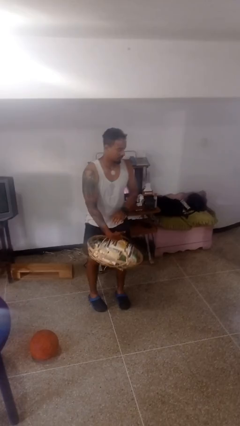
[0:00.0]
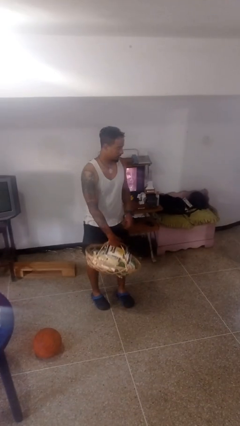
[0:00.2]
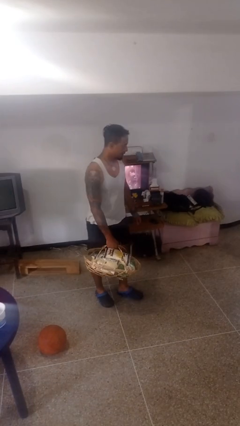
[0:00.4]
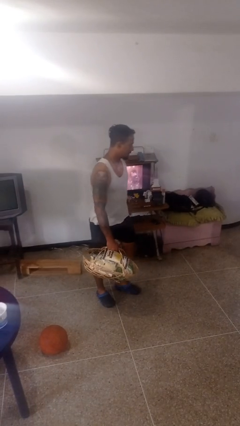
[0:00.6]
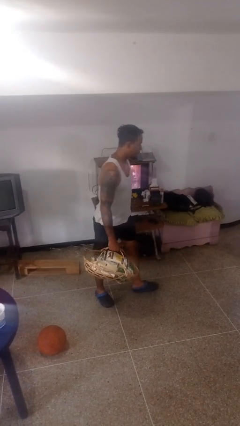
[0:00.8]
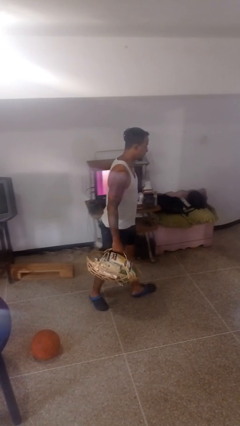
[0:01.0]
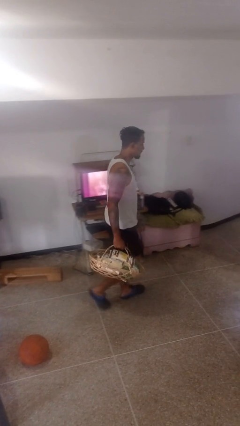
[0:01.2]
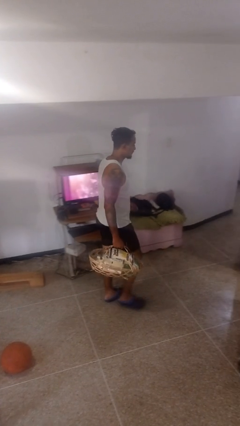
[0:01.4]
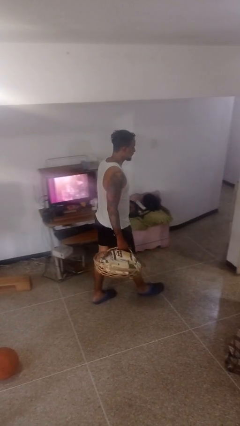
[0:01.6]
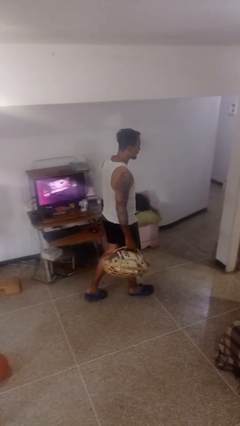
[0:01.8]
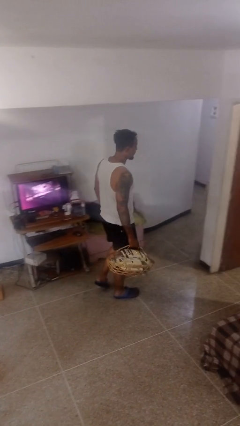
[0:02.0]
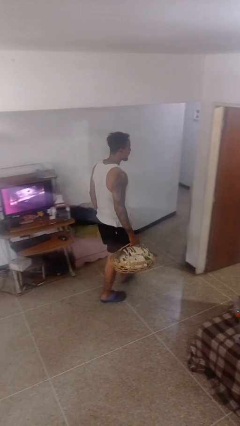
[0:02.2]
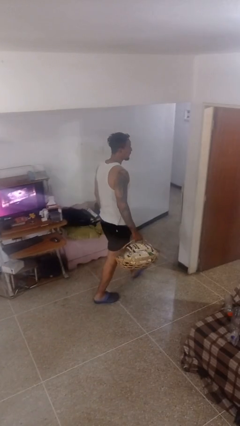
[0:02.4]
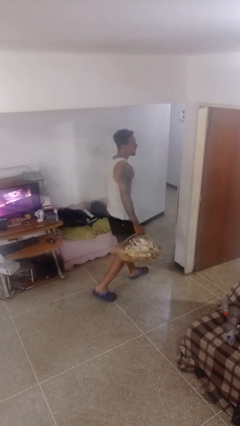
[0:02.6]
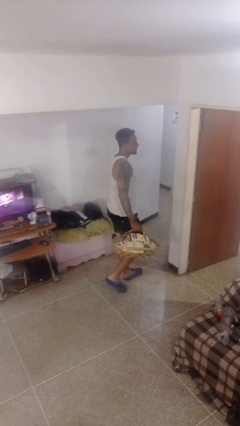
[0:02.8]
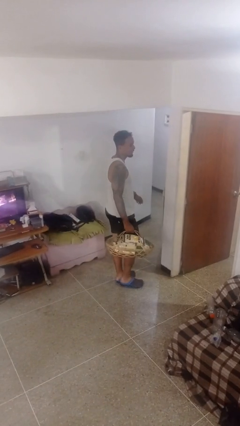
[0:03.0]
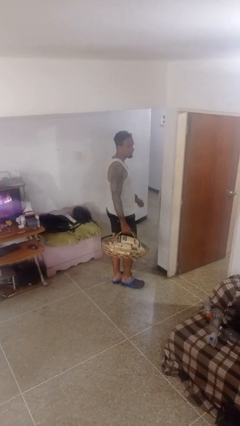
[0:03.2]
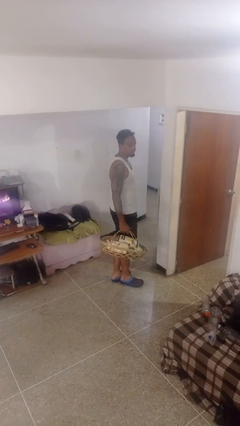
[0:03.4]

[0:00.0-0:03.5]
person carries groceries

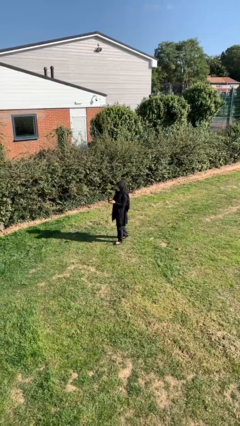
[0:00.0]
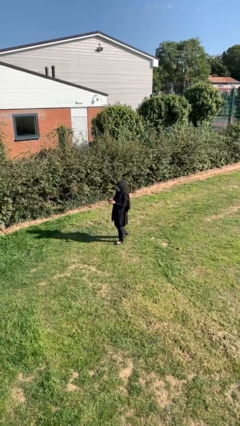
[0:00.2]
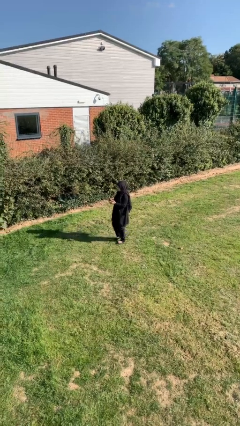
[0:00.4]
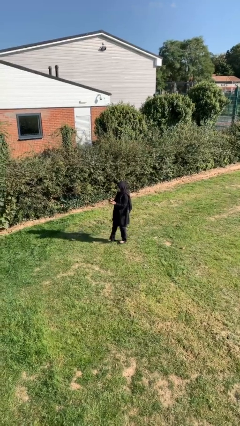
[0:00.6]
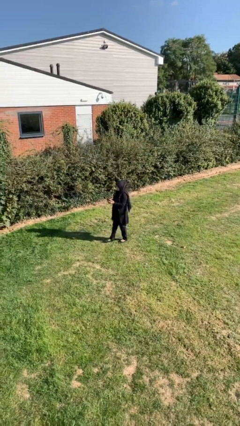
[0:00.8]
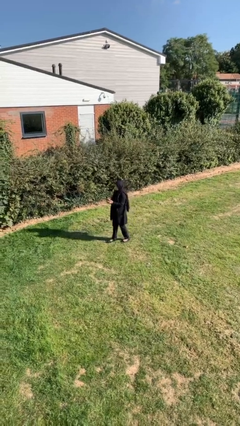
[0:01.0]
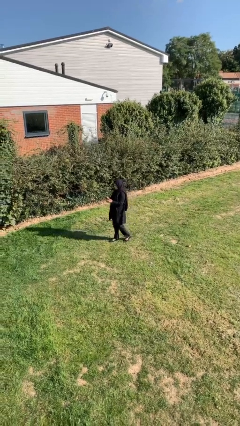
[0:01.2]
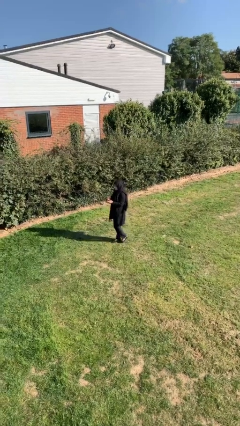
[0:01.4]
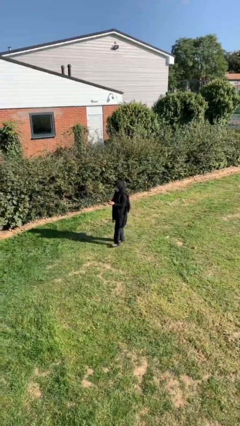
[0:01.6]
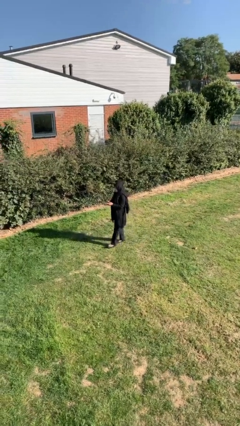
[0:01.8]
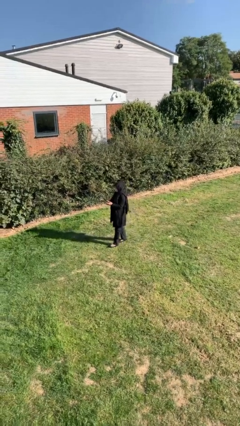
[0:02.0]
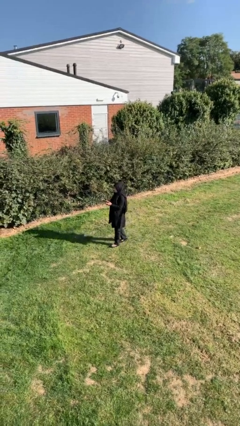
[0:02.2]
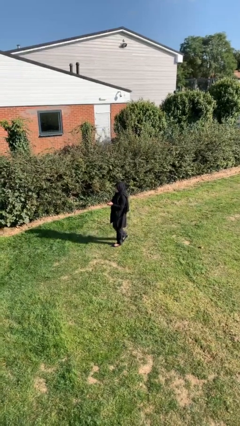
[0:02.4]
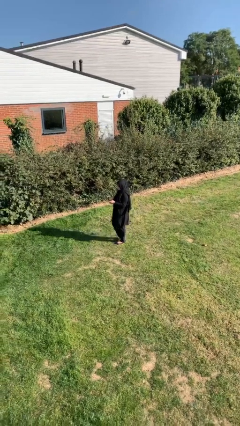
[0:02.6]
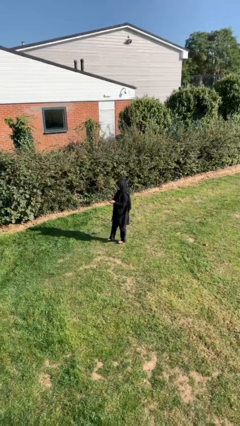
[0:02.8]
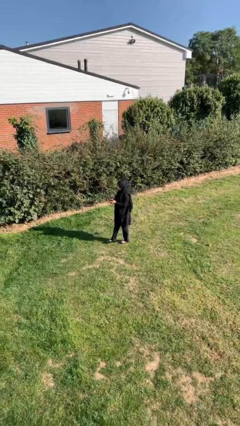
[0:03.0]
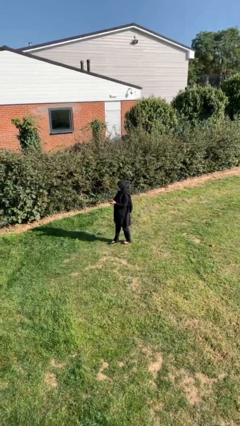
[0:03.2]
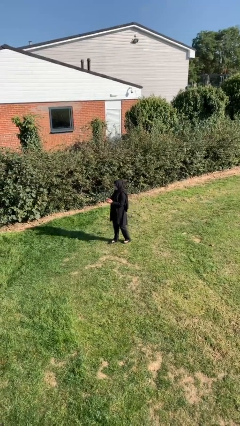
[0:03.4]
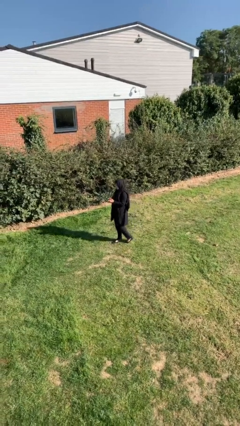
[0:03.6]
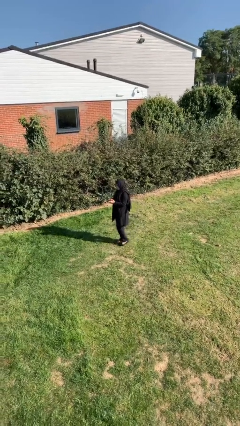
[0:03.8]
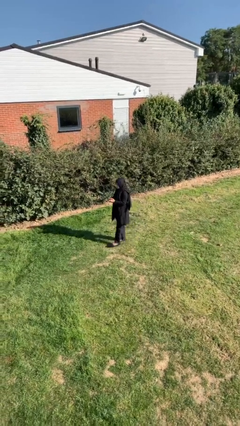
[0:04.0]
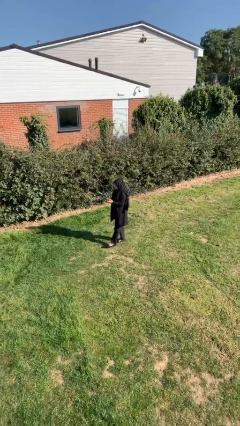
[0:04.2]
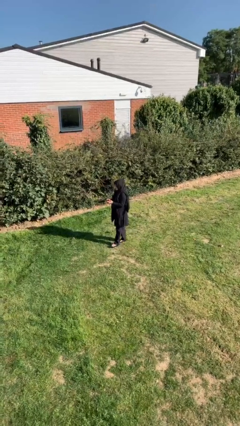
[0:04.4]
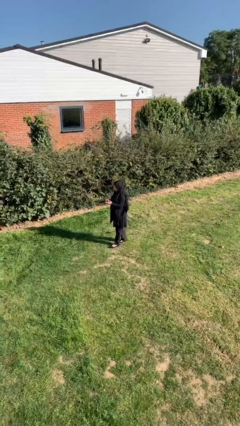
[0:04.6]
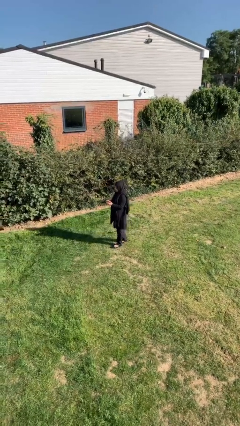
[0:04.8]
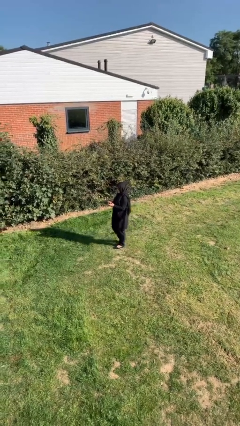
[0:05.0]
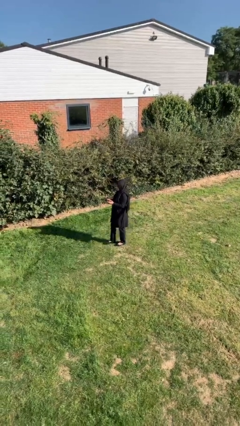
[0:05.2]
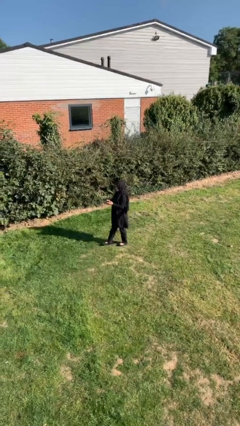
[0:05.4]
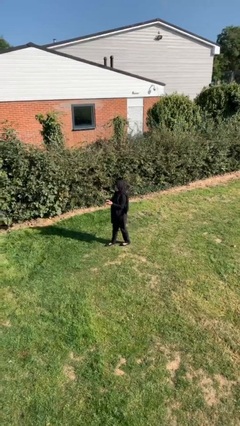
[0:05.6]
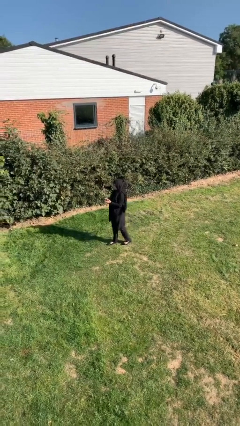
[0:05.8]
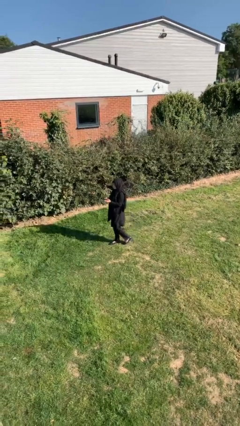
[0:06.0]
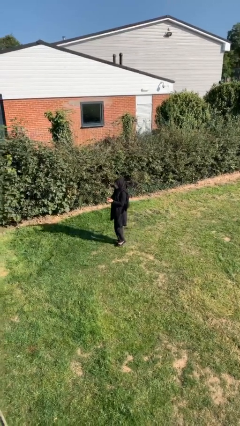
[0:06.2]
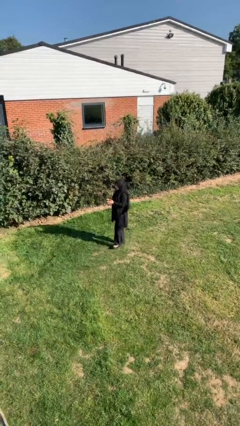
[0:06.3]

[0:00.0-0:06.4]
person texts on phone

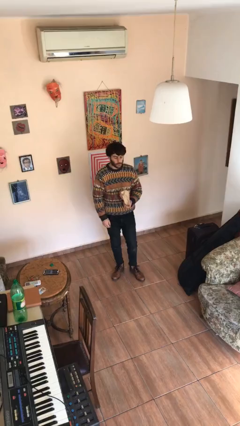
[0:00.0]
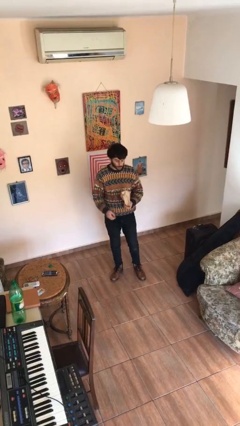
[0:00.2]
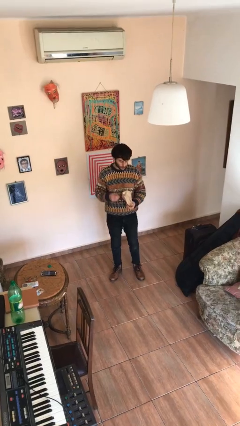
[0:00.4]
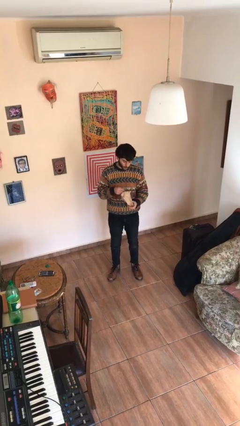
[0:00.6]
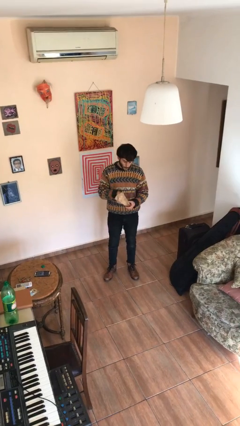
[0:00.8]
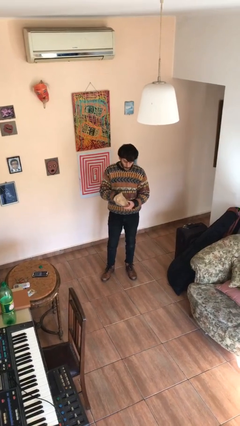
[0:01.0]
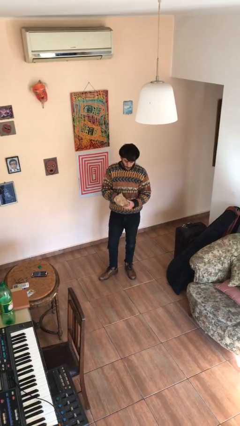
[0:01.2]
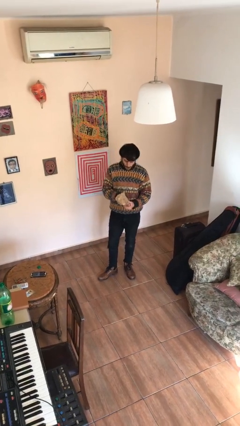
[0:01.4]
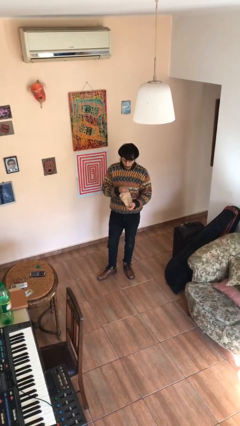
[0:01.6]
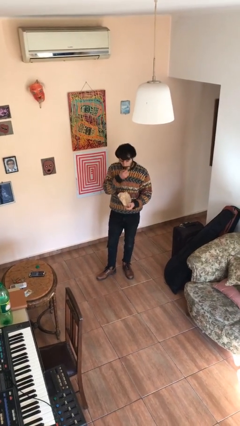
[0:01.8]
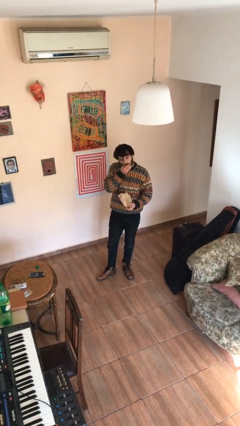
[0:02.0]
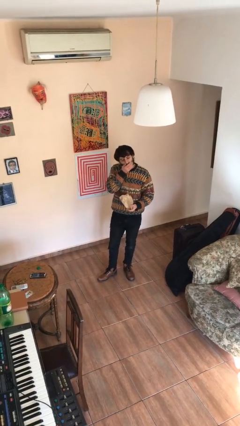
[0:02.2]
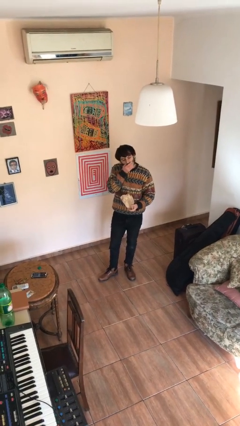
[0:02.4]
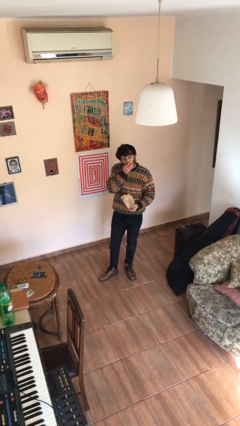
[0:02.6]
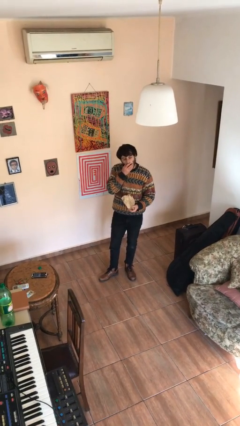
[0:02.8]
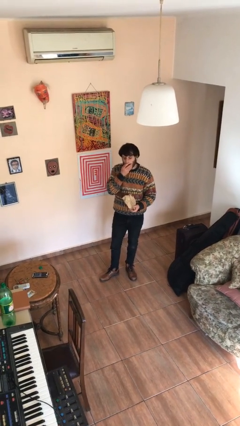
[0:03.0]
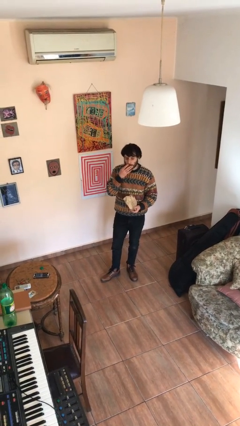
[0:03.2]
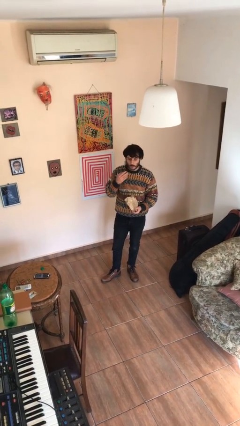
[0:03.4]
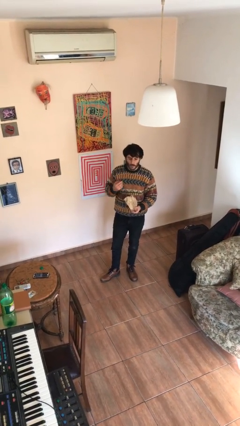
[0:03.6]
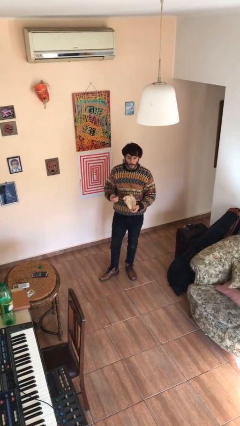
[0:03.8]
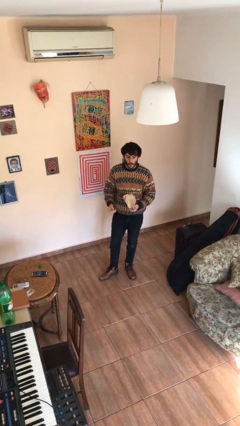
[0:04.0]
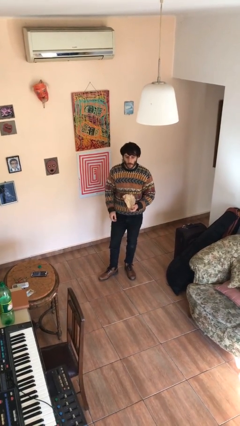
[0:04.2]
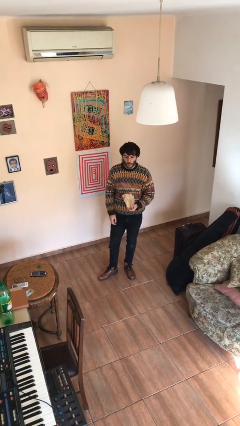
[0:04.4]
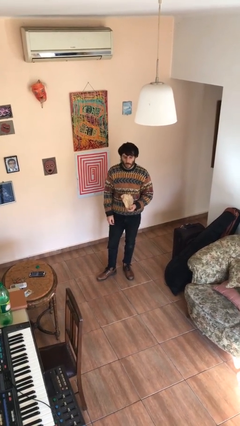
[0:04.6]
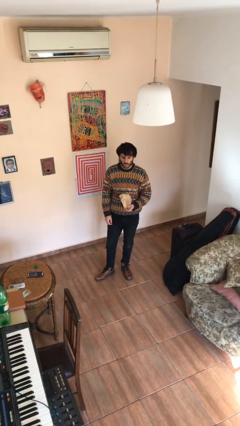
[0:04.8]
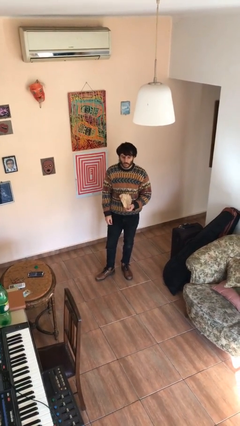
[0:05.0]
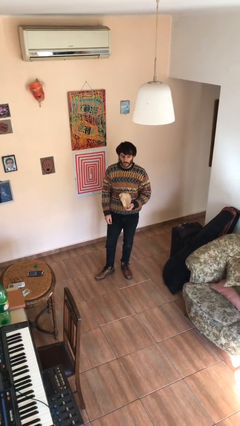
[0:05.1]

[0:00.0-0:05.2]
person eats snack from bag

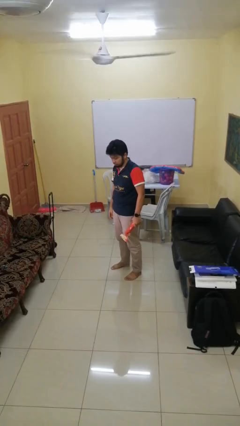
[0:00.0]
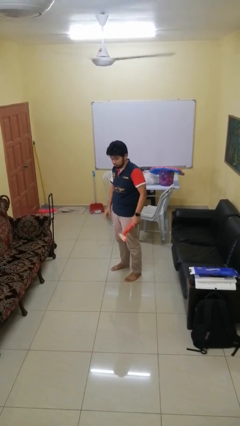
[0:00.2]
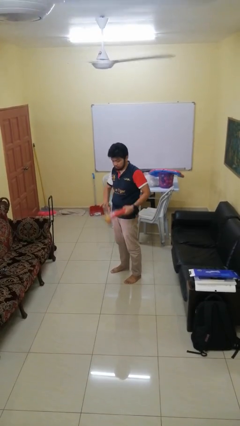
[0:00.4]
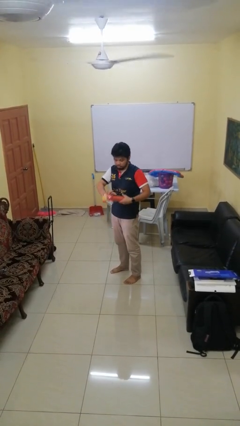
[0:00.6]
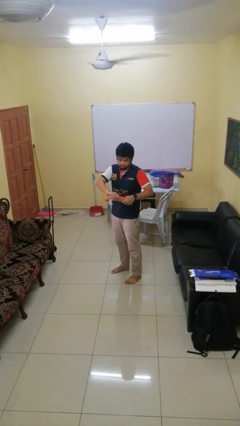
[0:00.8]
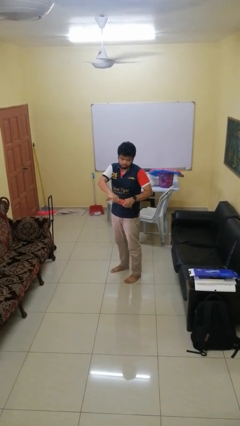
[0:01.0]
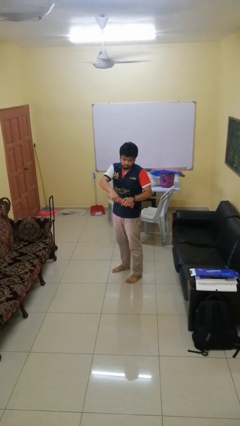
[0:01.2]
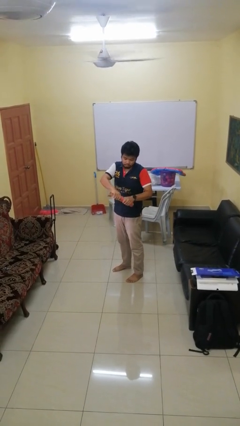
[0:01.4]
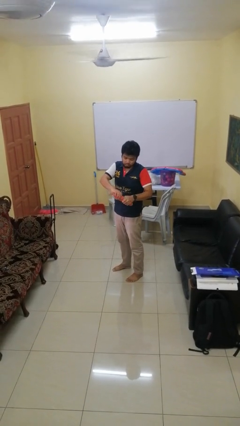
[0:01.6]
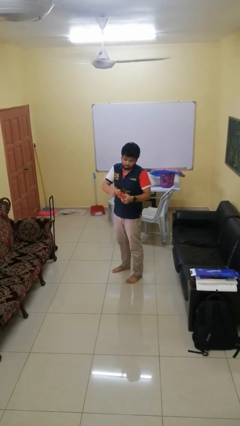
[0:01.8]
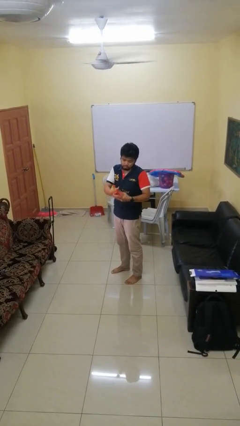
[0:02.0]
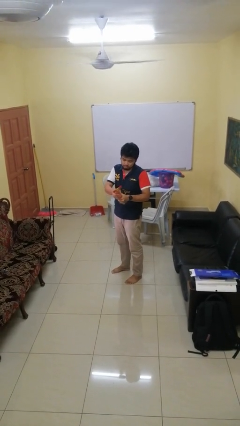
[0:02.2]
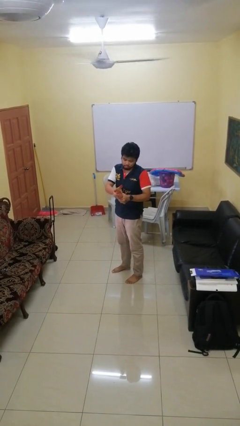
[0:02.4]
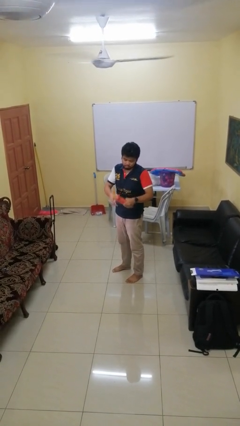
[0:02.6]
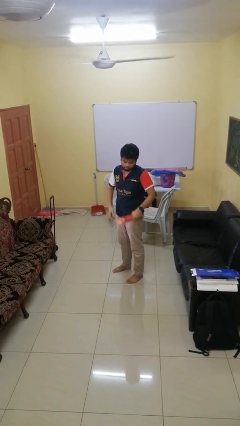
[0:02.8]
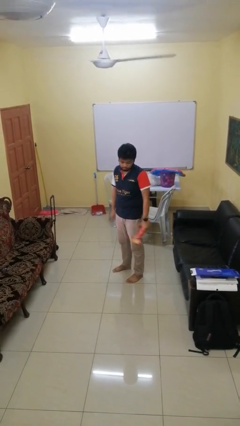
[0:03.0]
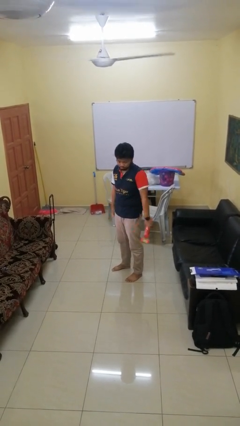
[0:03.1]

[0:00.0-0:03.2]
person squeezes object

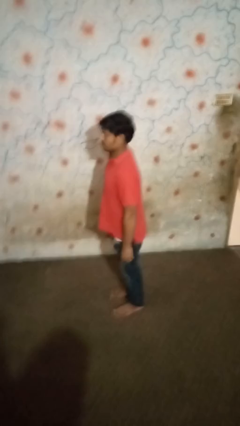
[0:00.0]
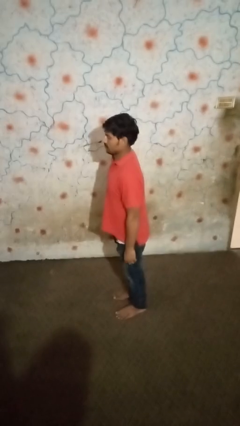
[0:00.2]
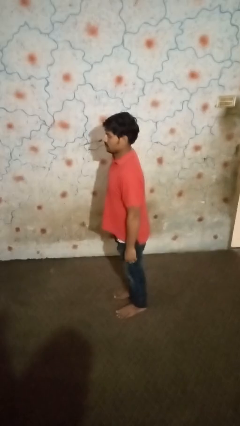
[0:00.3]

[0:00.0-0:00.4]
person puts hands in back pockets
